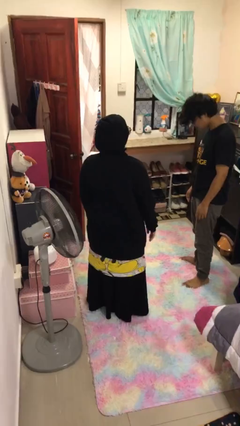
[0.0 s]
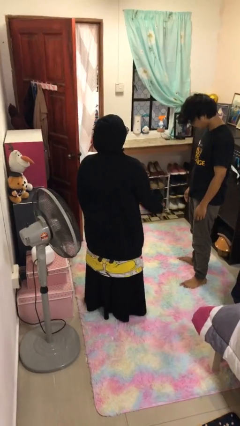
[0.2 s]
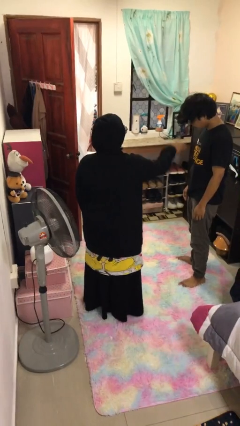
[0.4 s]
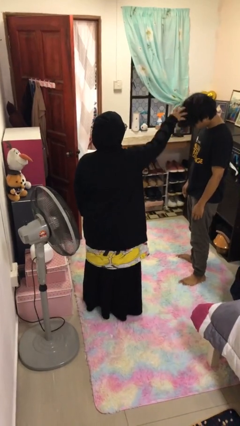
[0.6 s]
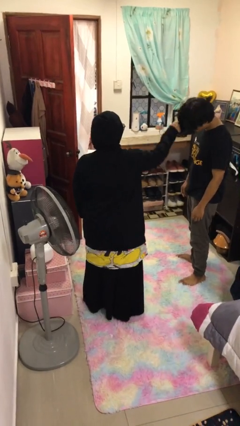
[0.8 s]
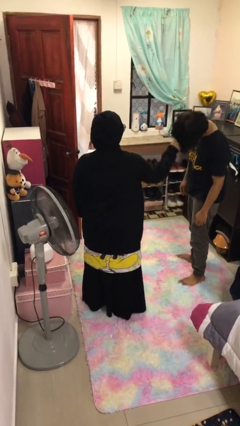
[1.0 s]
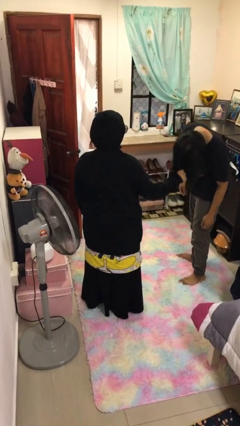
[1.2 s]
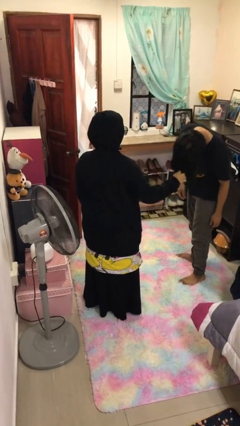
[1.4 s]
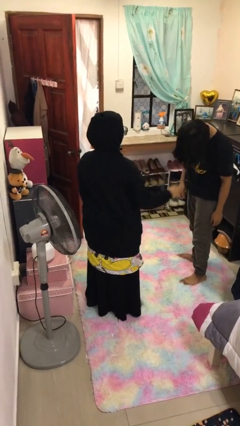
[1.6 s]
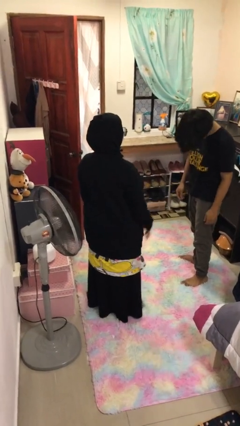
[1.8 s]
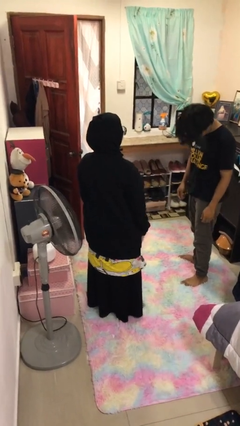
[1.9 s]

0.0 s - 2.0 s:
person grabs person by hair

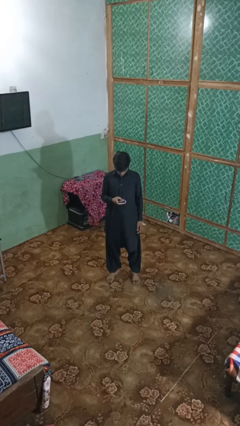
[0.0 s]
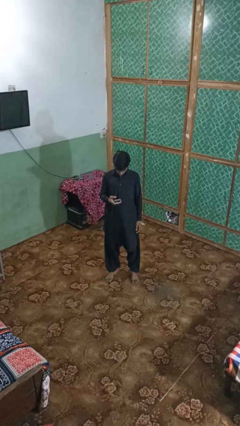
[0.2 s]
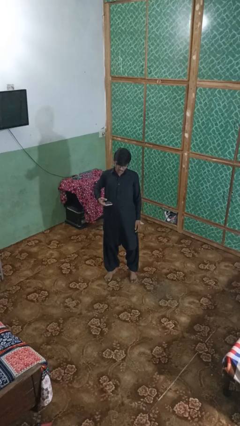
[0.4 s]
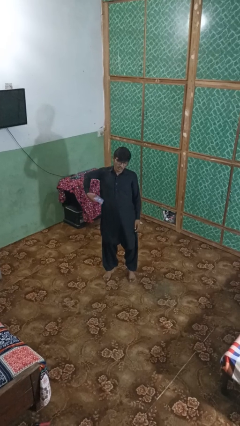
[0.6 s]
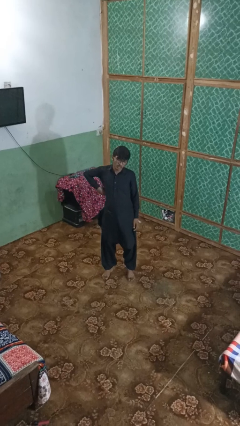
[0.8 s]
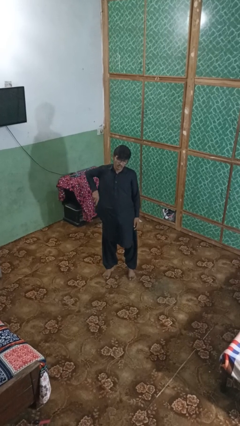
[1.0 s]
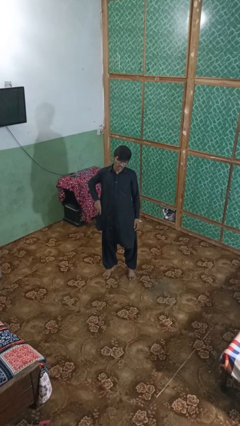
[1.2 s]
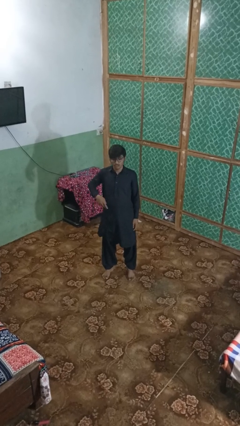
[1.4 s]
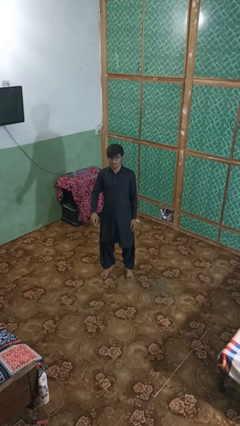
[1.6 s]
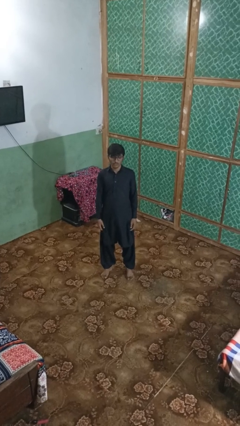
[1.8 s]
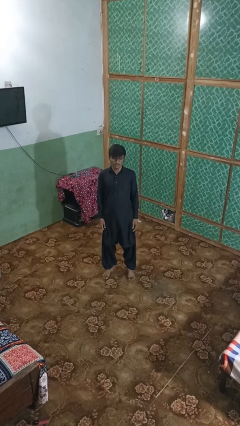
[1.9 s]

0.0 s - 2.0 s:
person puts phone into pocket

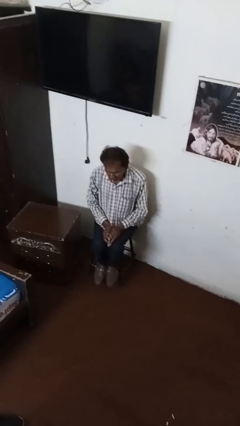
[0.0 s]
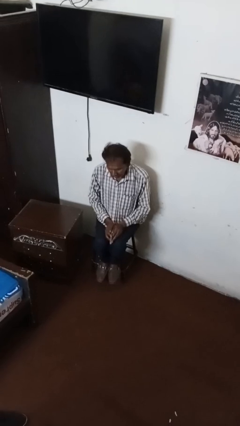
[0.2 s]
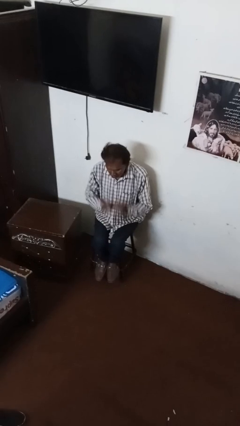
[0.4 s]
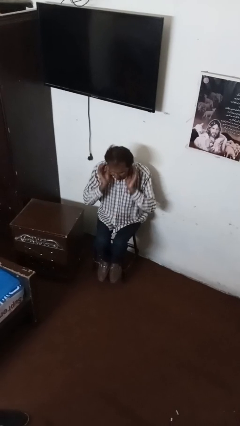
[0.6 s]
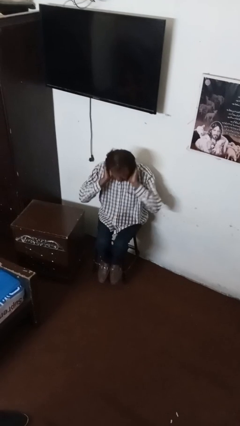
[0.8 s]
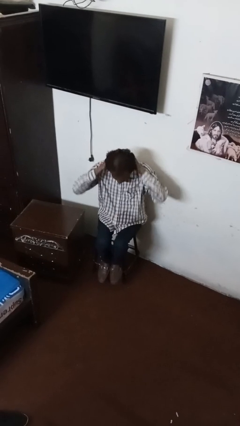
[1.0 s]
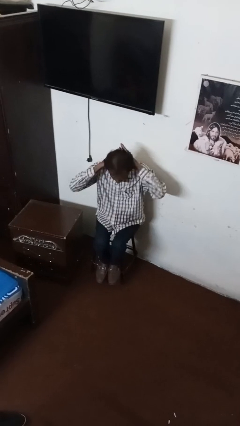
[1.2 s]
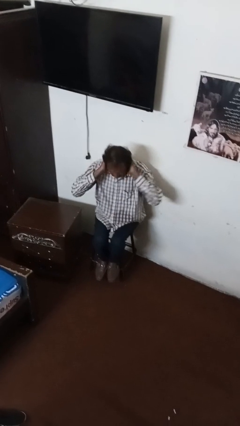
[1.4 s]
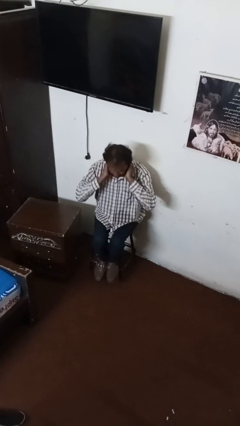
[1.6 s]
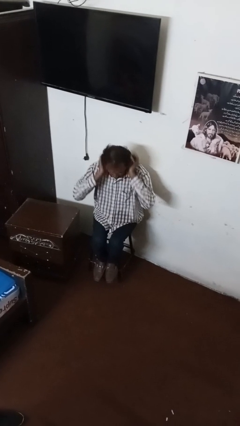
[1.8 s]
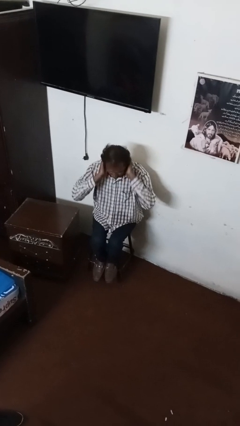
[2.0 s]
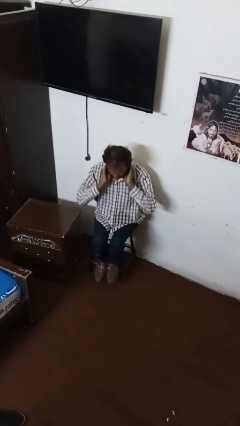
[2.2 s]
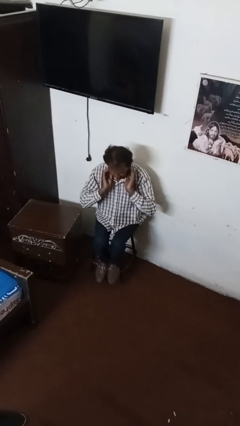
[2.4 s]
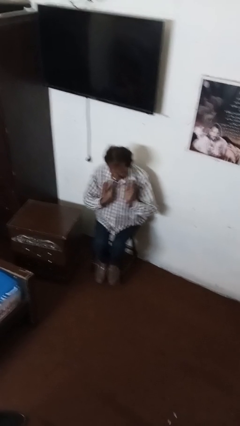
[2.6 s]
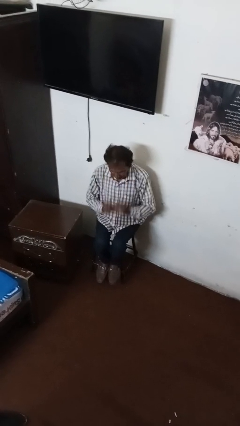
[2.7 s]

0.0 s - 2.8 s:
person strokes hair

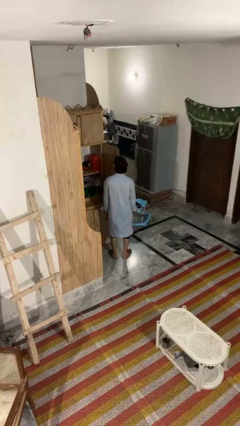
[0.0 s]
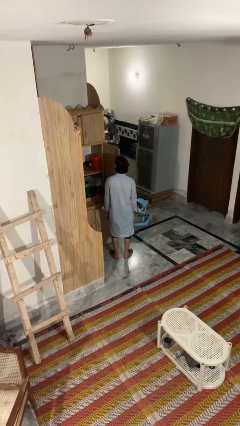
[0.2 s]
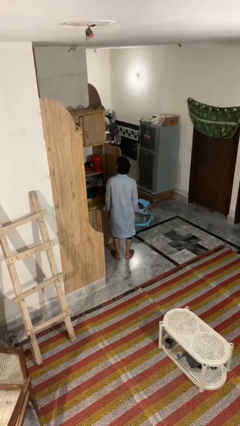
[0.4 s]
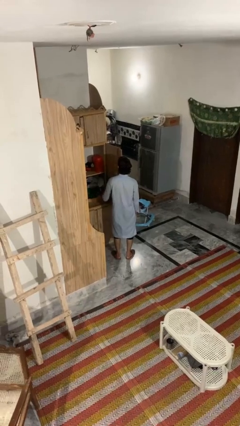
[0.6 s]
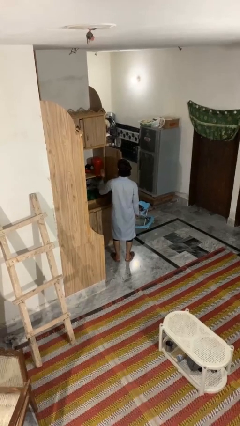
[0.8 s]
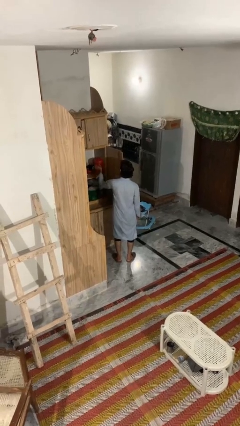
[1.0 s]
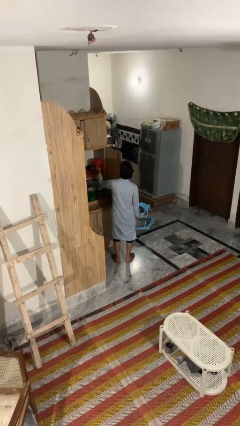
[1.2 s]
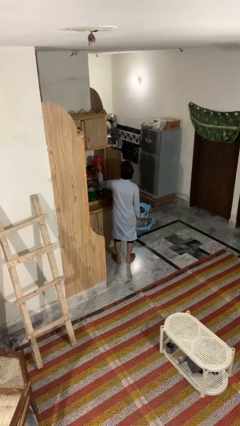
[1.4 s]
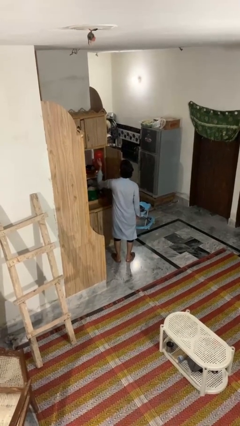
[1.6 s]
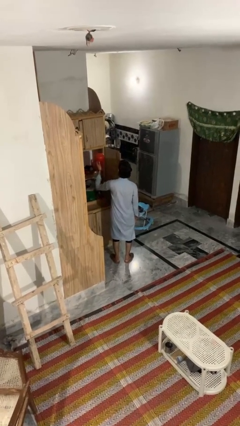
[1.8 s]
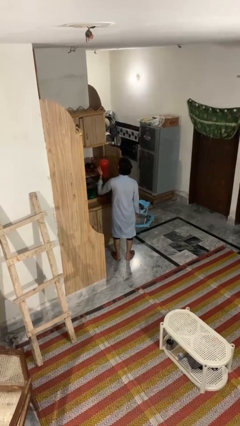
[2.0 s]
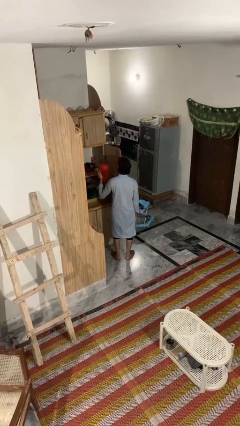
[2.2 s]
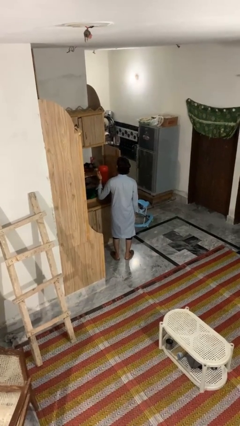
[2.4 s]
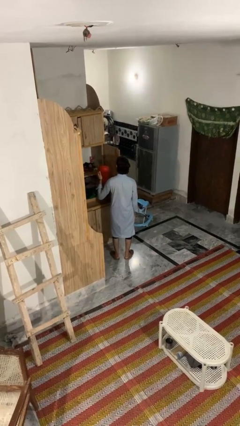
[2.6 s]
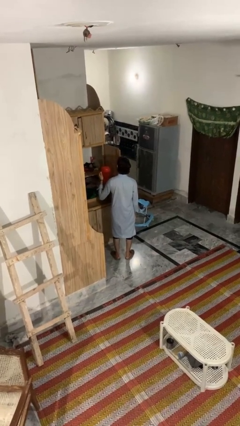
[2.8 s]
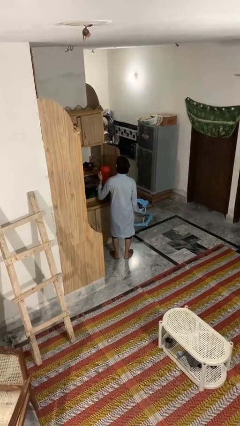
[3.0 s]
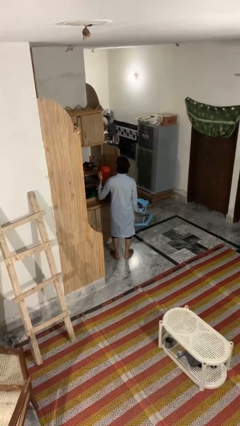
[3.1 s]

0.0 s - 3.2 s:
person picks up object from cabinet

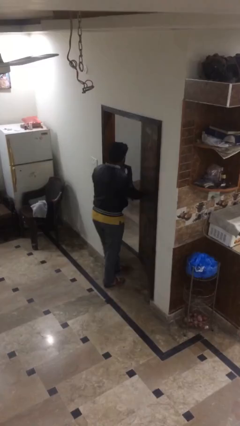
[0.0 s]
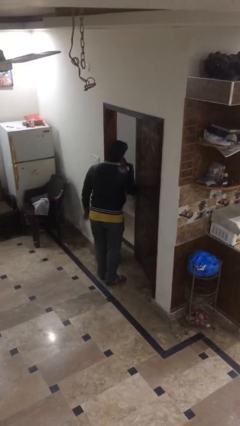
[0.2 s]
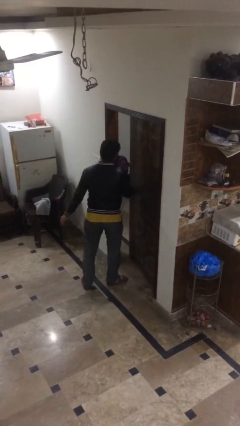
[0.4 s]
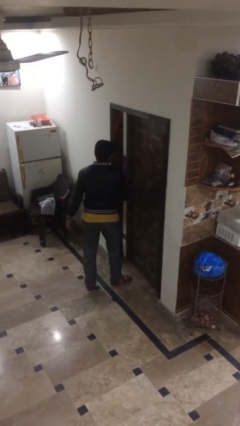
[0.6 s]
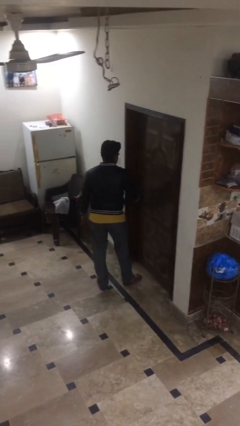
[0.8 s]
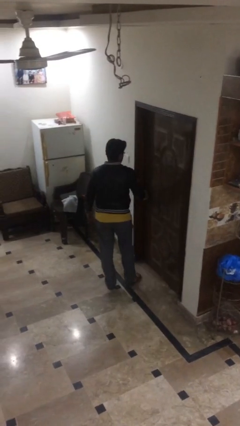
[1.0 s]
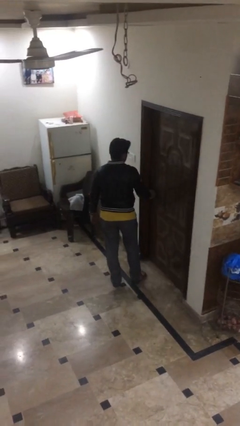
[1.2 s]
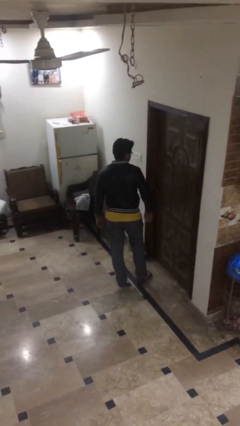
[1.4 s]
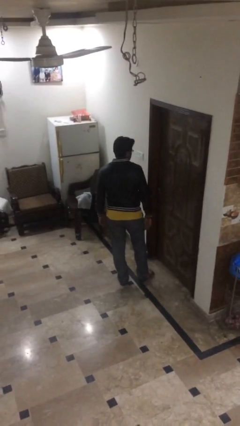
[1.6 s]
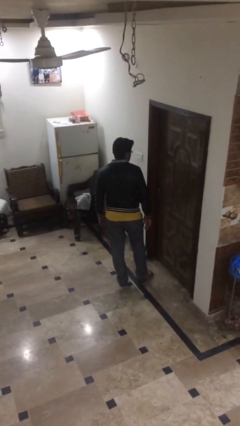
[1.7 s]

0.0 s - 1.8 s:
person closes facility door

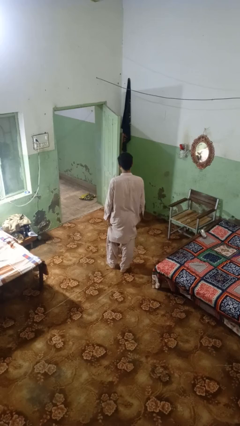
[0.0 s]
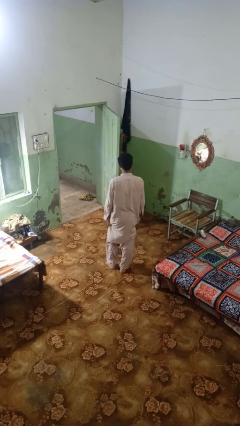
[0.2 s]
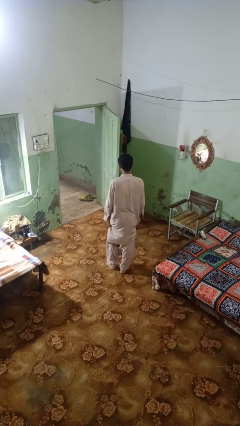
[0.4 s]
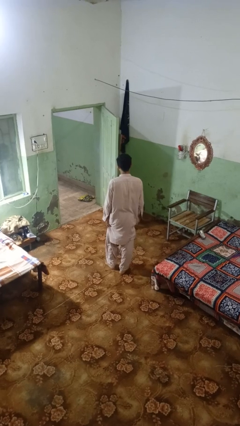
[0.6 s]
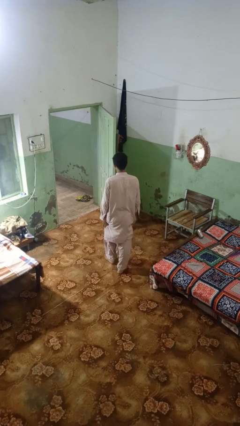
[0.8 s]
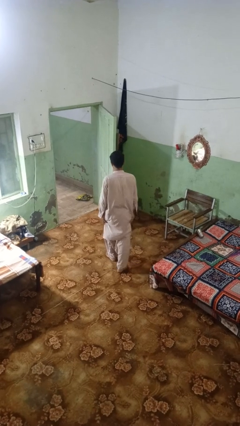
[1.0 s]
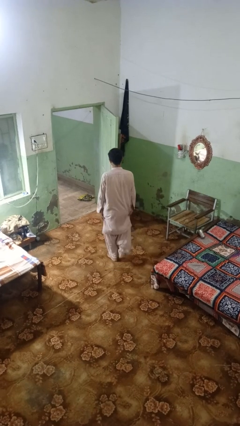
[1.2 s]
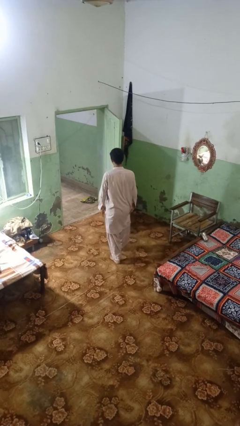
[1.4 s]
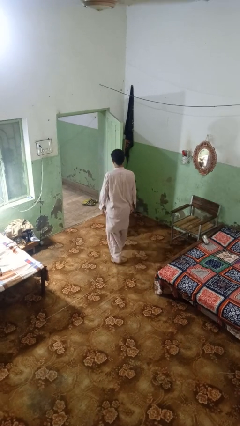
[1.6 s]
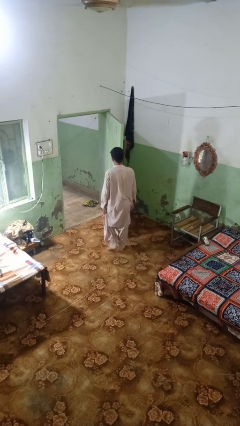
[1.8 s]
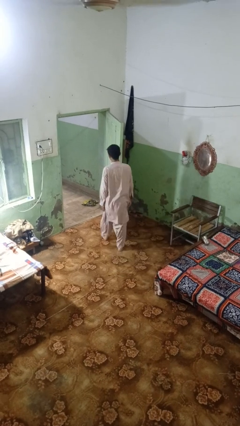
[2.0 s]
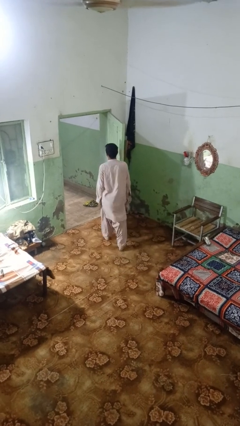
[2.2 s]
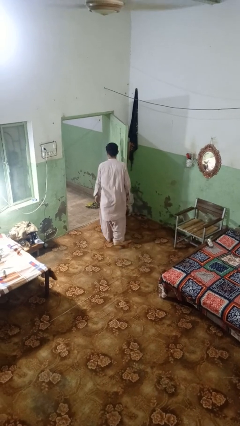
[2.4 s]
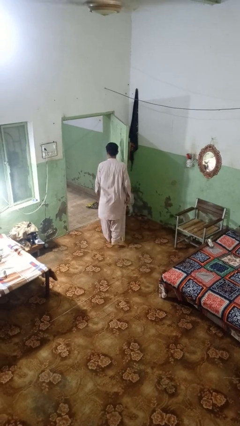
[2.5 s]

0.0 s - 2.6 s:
person bumps into wall

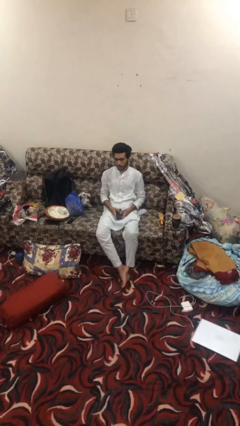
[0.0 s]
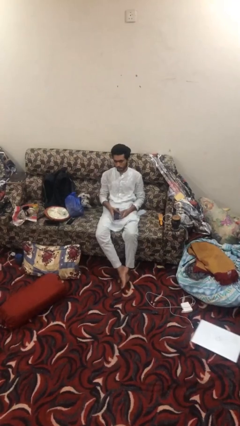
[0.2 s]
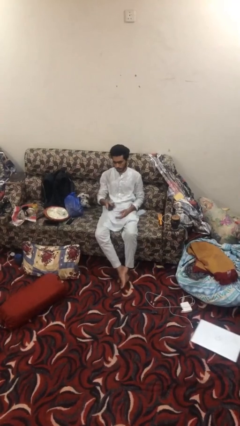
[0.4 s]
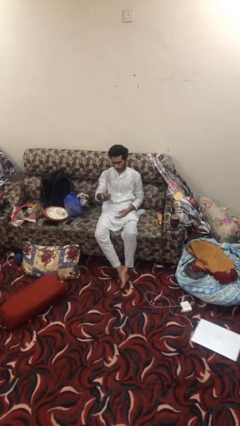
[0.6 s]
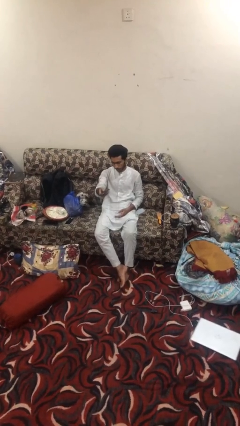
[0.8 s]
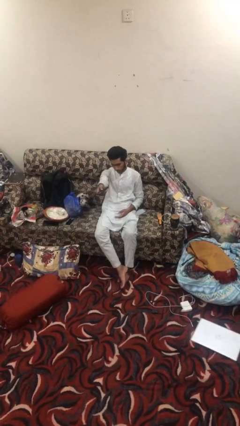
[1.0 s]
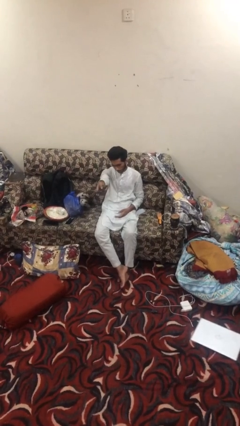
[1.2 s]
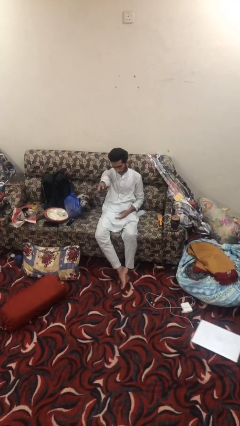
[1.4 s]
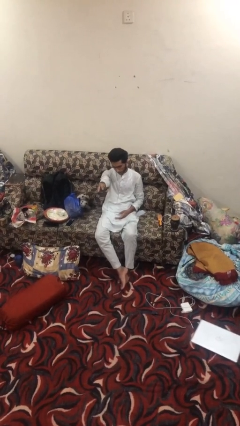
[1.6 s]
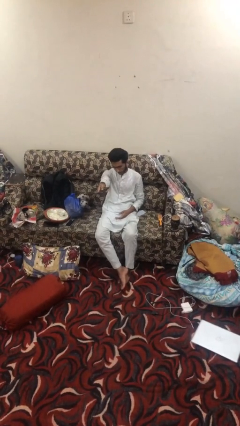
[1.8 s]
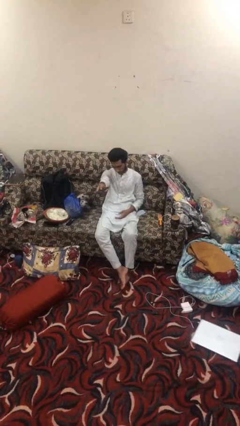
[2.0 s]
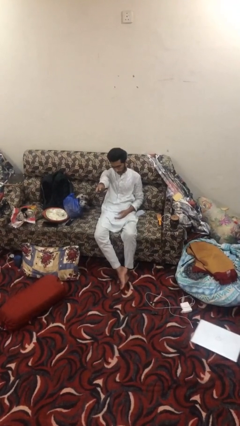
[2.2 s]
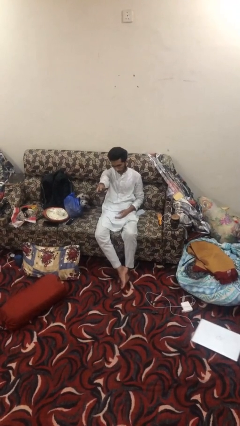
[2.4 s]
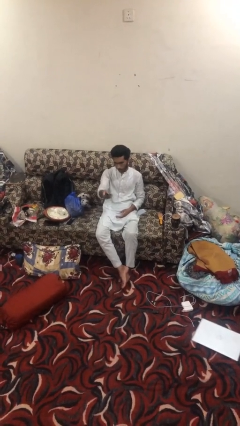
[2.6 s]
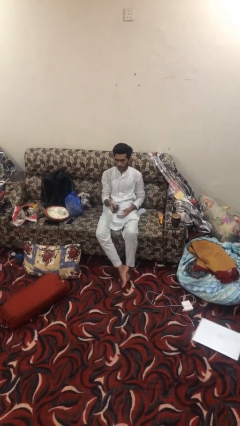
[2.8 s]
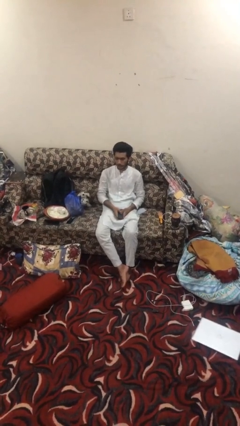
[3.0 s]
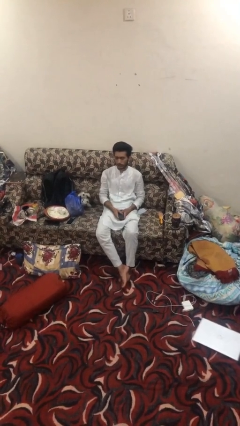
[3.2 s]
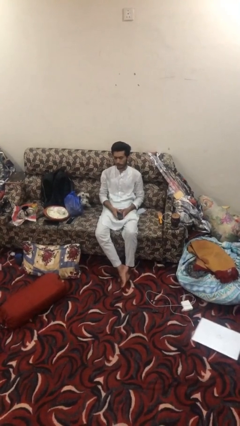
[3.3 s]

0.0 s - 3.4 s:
person uses television remote
